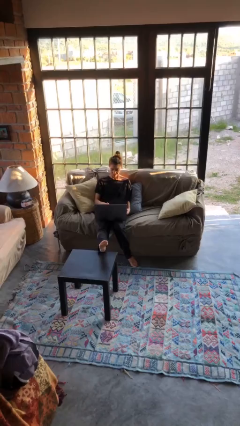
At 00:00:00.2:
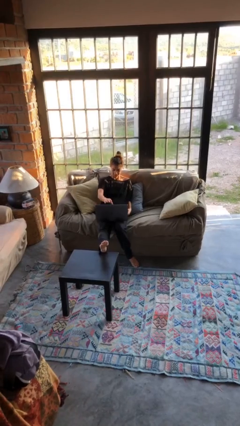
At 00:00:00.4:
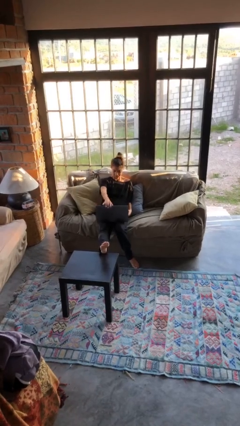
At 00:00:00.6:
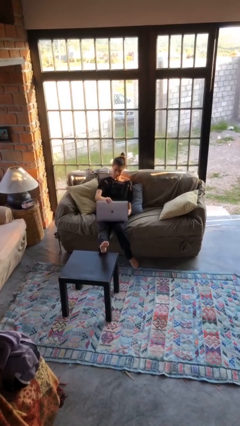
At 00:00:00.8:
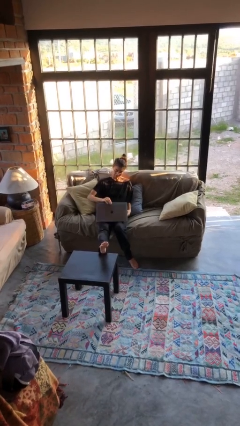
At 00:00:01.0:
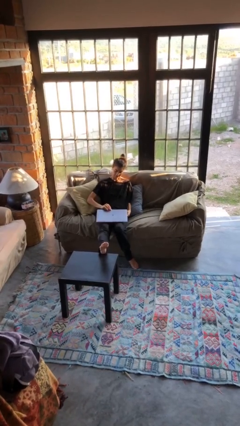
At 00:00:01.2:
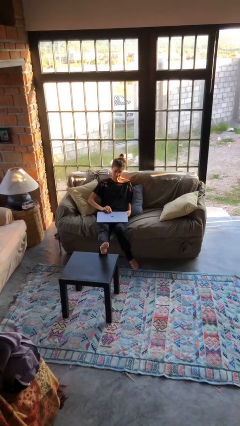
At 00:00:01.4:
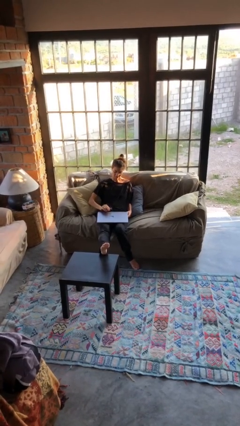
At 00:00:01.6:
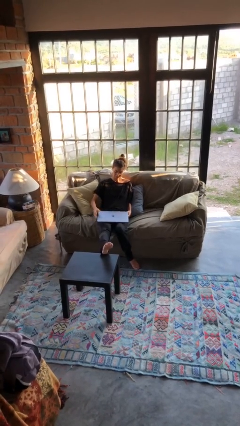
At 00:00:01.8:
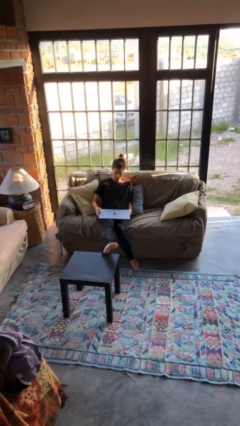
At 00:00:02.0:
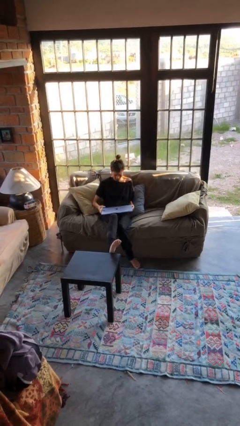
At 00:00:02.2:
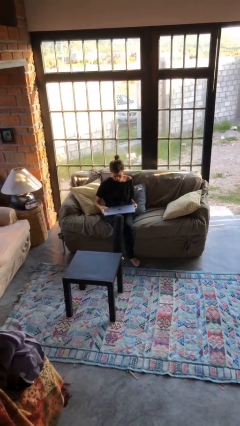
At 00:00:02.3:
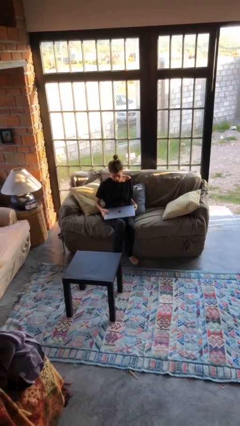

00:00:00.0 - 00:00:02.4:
person closes laptop

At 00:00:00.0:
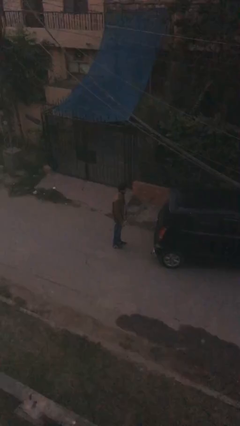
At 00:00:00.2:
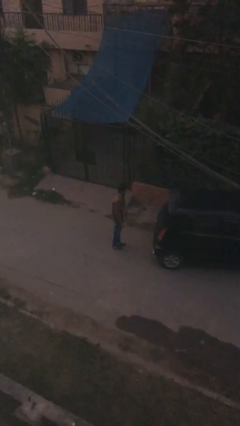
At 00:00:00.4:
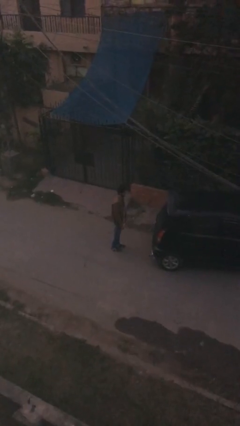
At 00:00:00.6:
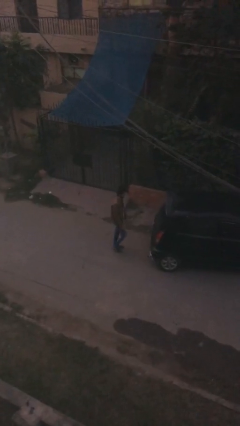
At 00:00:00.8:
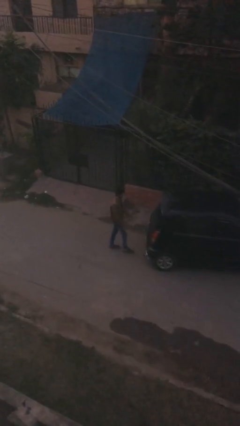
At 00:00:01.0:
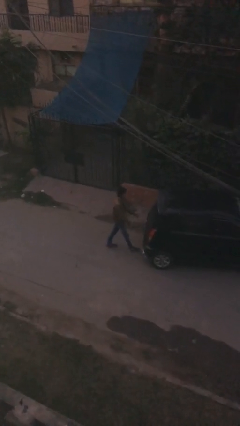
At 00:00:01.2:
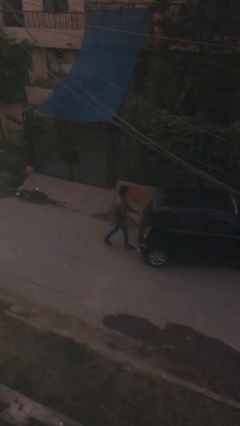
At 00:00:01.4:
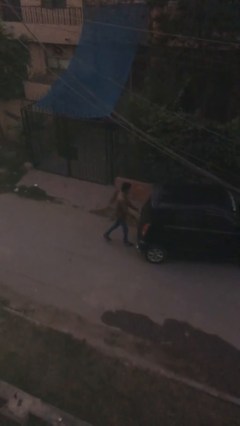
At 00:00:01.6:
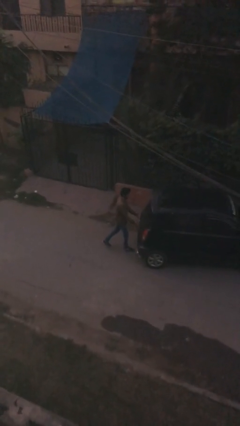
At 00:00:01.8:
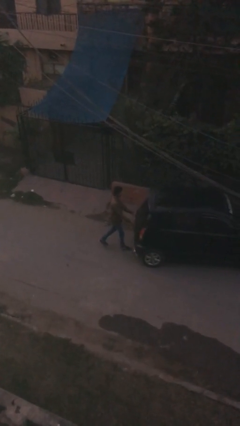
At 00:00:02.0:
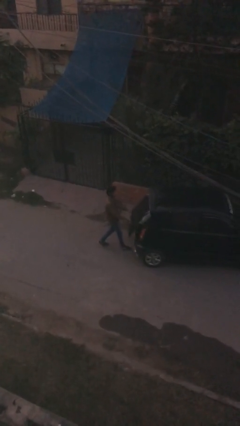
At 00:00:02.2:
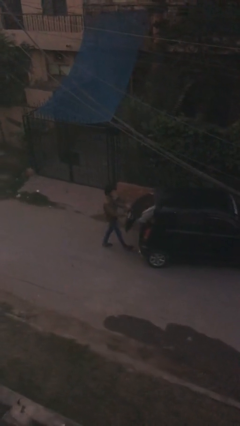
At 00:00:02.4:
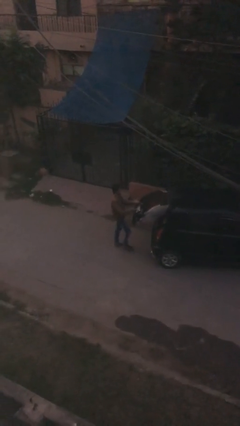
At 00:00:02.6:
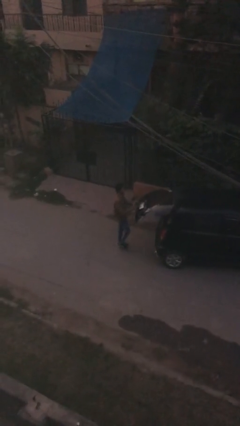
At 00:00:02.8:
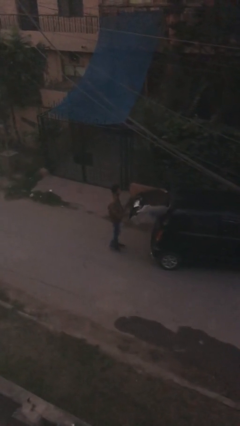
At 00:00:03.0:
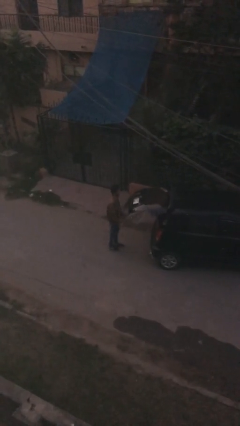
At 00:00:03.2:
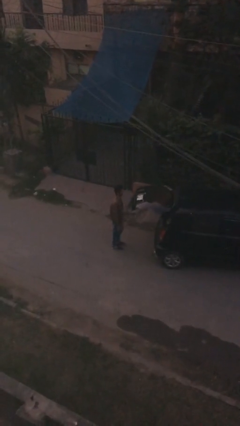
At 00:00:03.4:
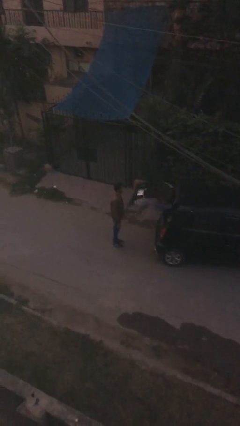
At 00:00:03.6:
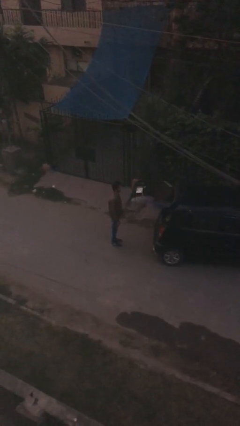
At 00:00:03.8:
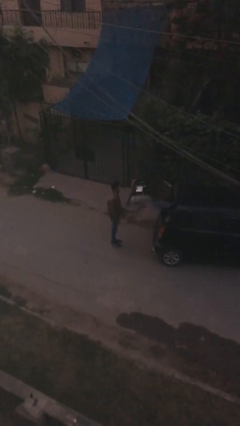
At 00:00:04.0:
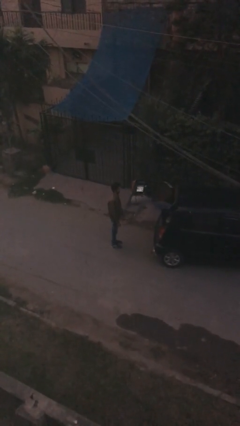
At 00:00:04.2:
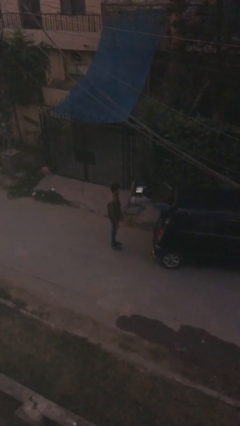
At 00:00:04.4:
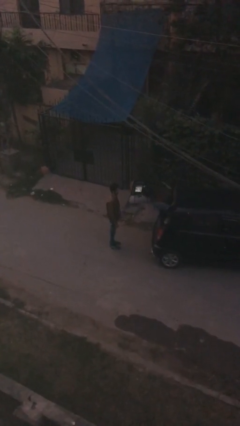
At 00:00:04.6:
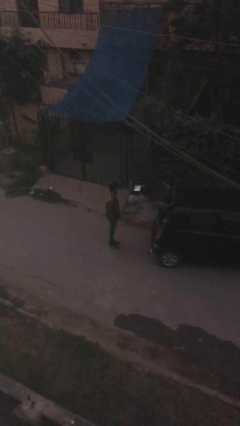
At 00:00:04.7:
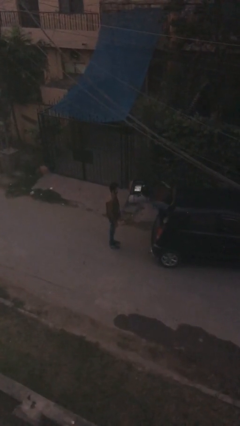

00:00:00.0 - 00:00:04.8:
person opens car trunk

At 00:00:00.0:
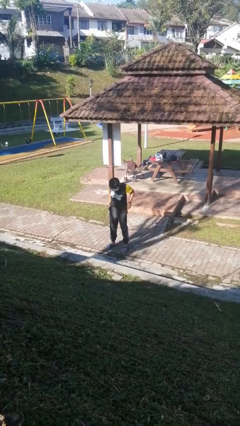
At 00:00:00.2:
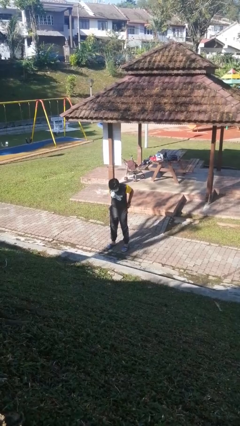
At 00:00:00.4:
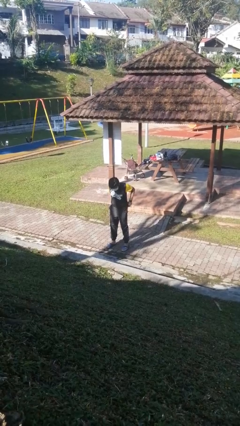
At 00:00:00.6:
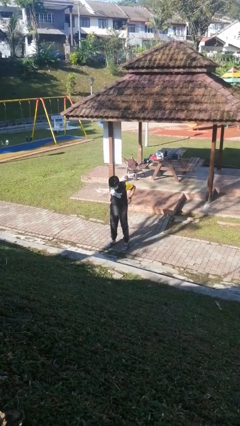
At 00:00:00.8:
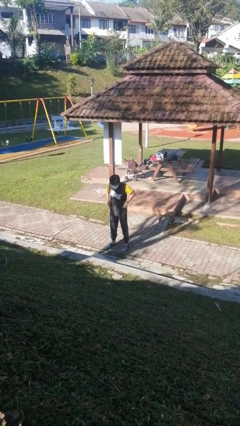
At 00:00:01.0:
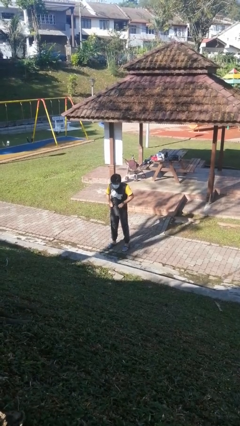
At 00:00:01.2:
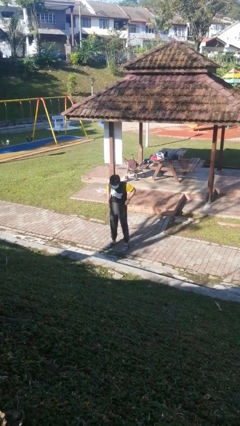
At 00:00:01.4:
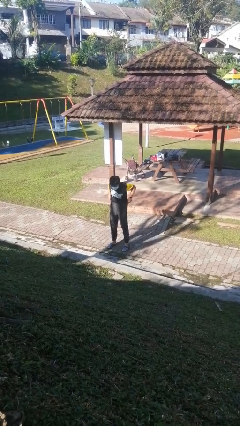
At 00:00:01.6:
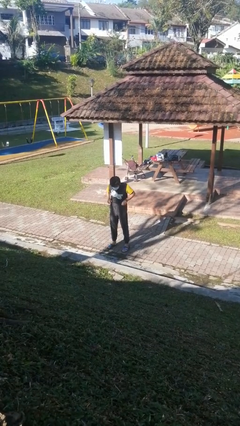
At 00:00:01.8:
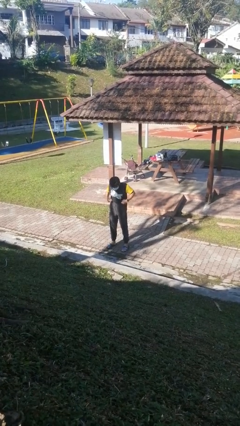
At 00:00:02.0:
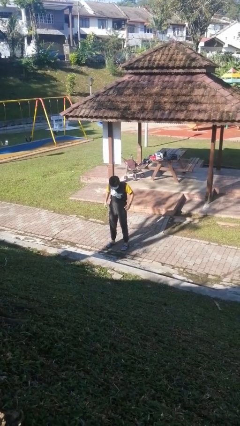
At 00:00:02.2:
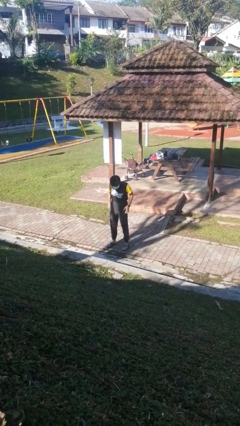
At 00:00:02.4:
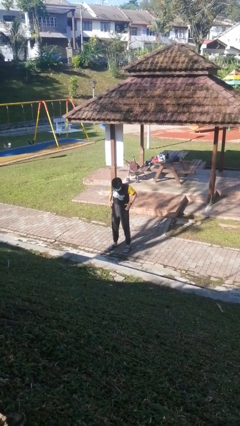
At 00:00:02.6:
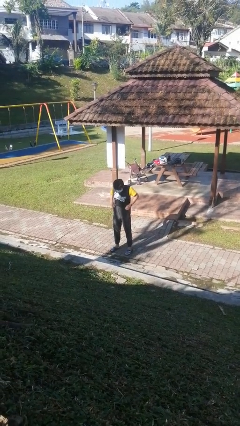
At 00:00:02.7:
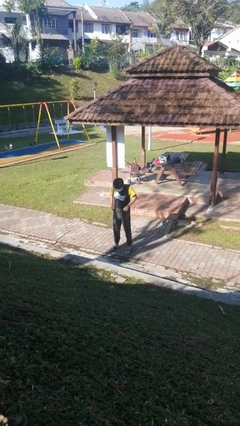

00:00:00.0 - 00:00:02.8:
person hikes up pants

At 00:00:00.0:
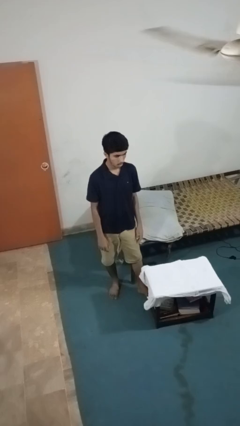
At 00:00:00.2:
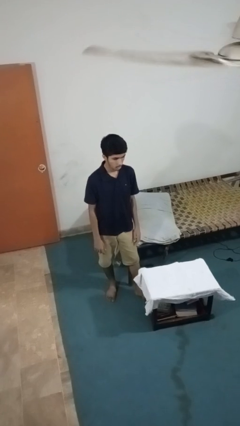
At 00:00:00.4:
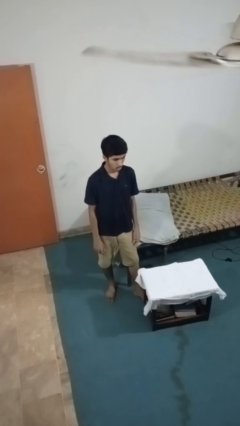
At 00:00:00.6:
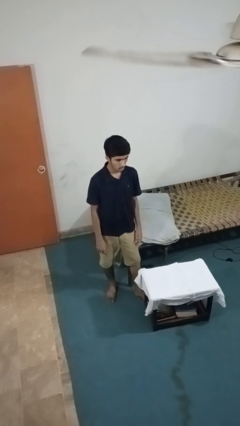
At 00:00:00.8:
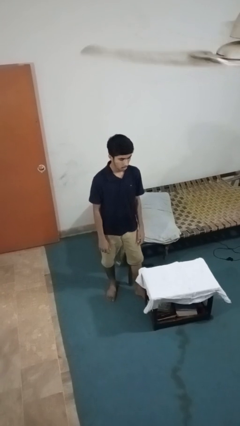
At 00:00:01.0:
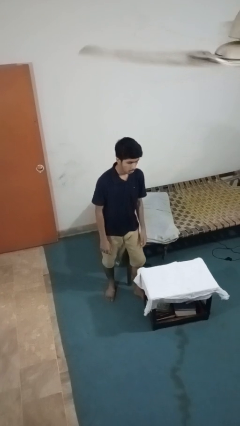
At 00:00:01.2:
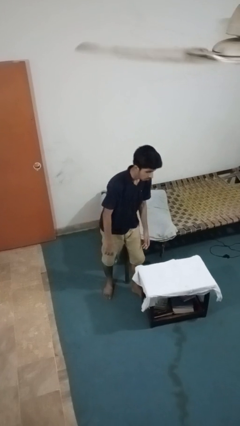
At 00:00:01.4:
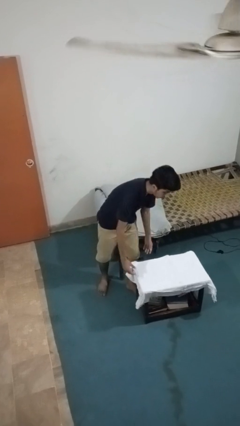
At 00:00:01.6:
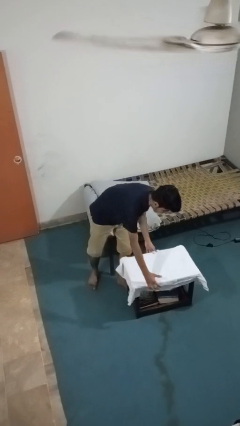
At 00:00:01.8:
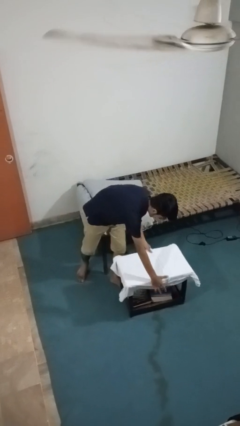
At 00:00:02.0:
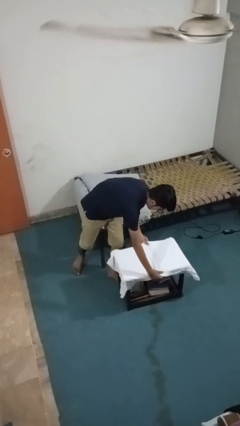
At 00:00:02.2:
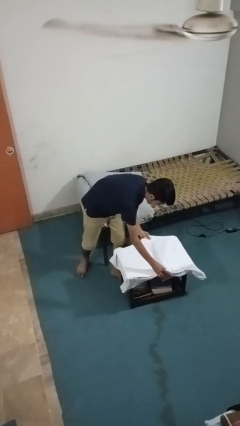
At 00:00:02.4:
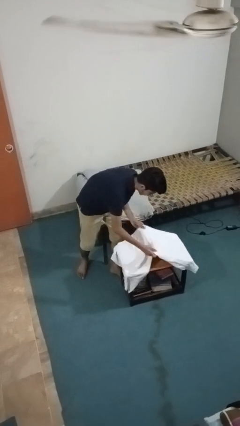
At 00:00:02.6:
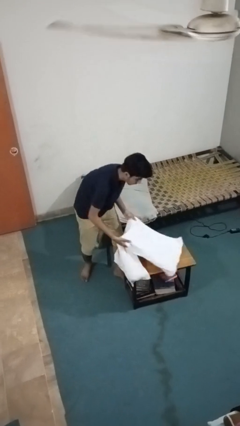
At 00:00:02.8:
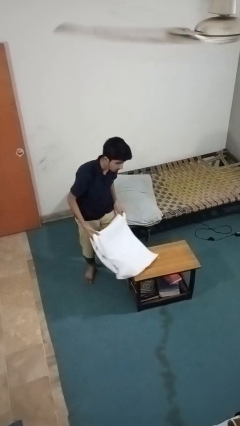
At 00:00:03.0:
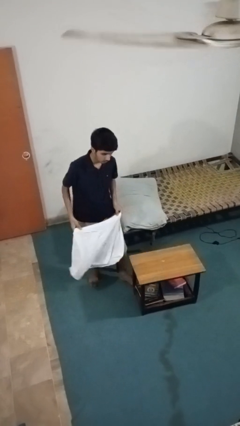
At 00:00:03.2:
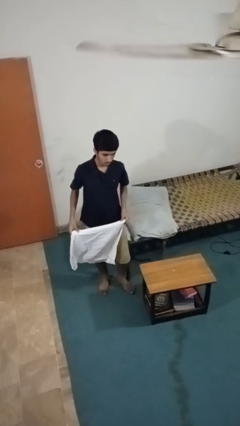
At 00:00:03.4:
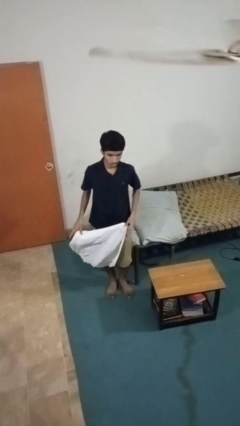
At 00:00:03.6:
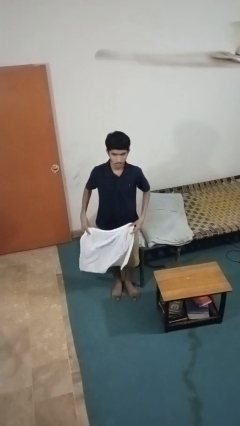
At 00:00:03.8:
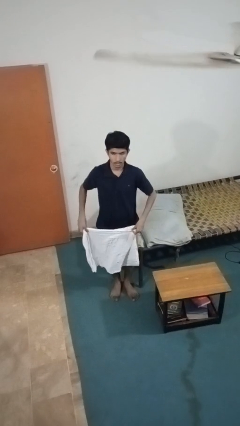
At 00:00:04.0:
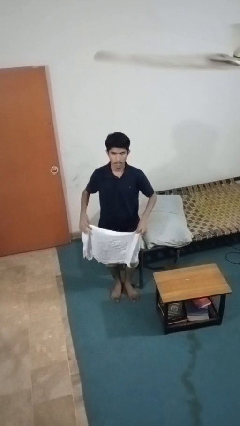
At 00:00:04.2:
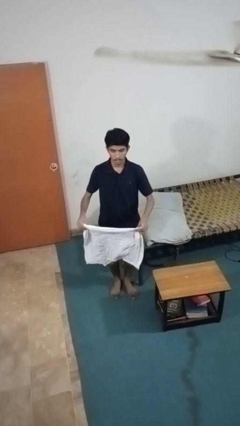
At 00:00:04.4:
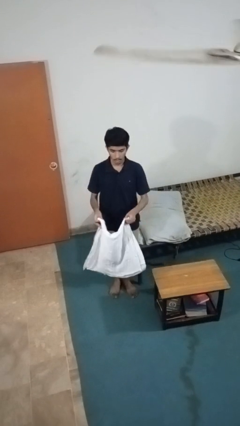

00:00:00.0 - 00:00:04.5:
person folds tablecloth

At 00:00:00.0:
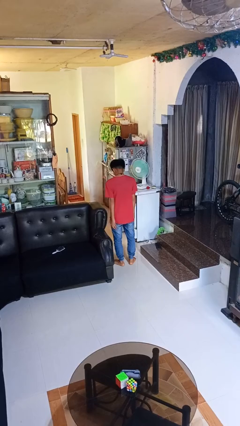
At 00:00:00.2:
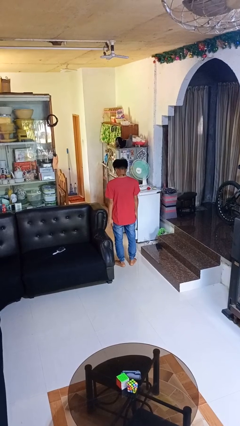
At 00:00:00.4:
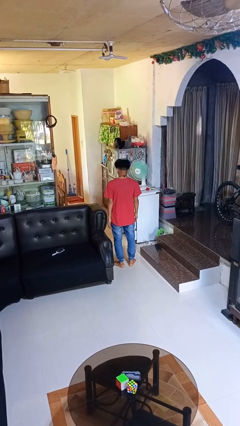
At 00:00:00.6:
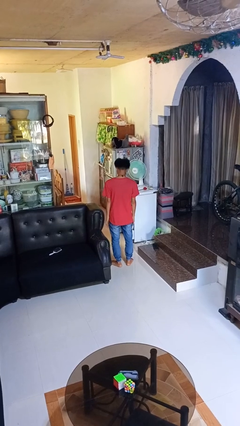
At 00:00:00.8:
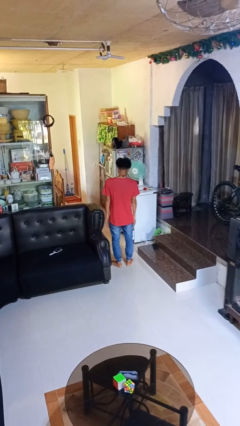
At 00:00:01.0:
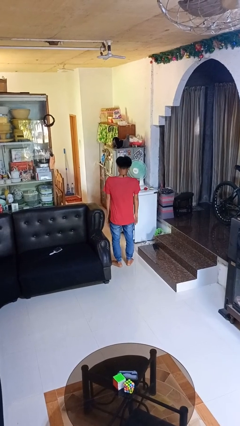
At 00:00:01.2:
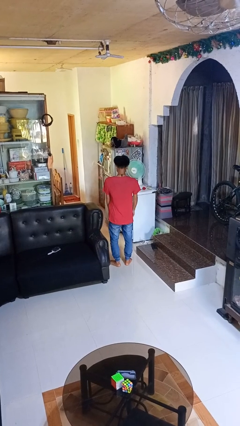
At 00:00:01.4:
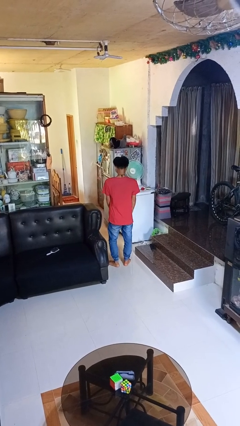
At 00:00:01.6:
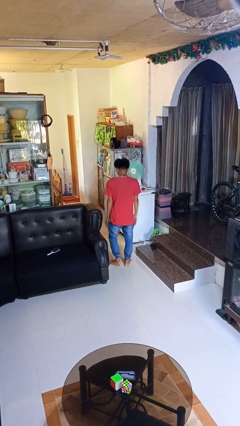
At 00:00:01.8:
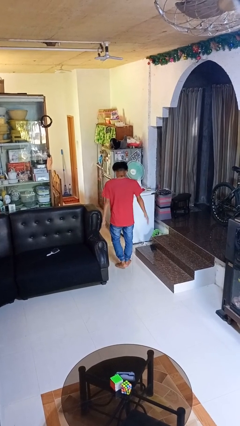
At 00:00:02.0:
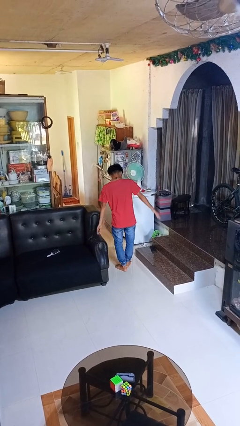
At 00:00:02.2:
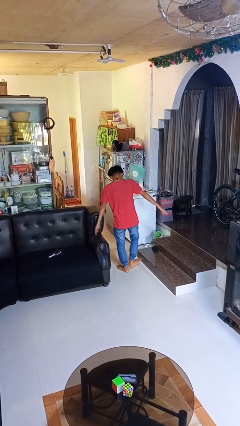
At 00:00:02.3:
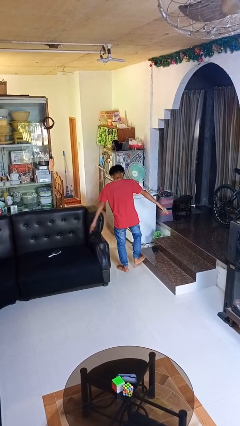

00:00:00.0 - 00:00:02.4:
person throws object into air

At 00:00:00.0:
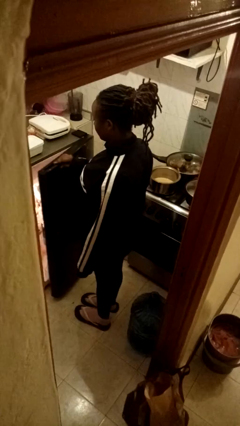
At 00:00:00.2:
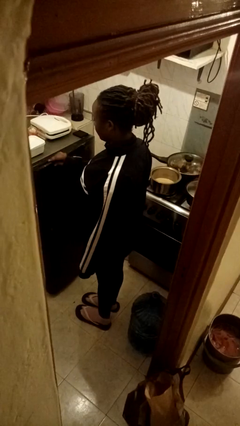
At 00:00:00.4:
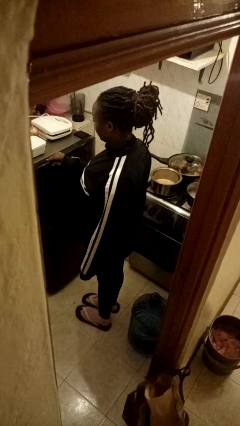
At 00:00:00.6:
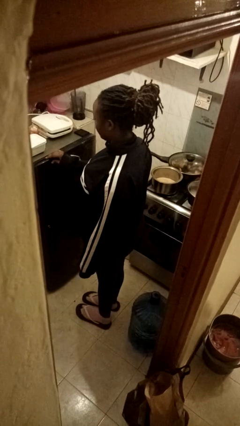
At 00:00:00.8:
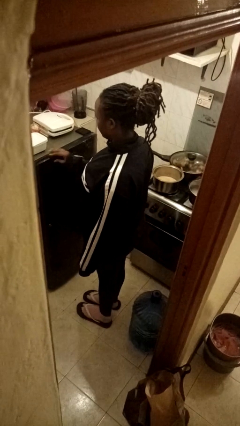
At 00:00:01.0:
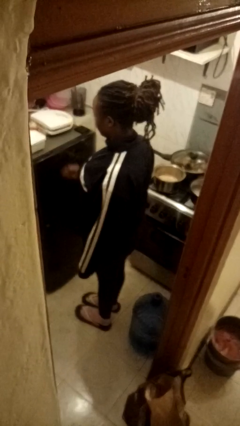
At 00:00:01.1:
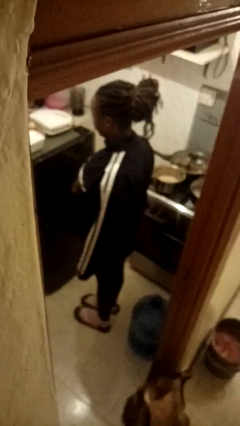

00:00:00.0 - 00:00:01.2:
person closes refrigerator
